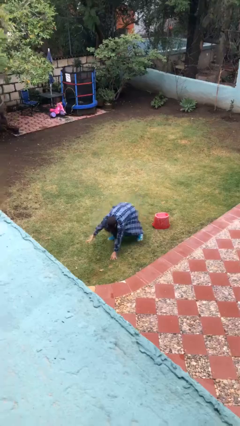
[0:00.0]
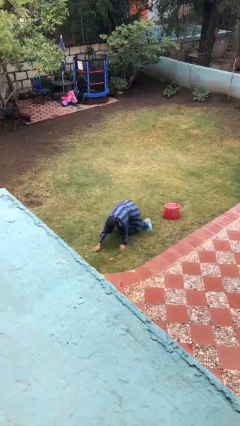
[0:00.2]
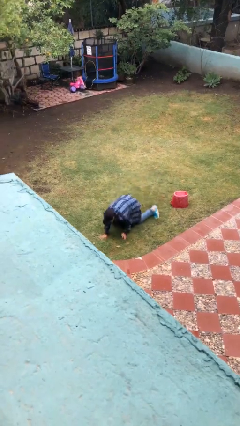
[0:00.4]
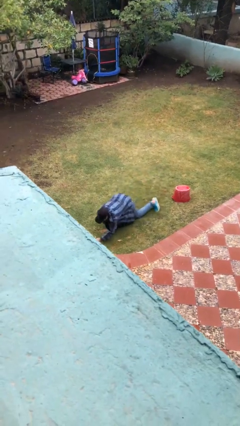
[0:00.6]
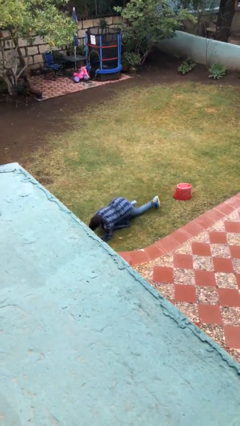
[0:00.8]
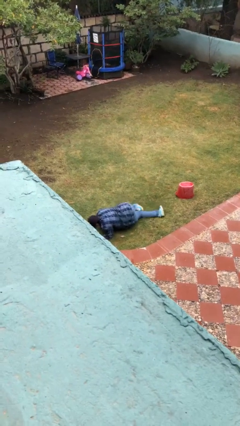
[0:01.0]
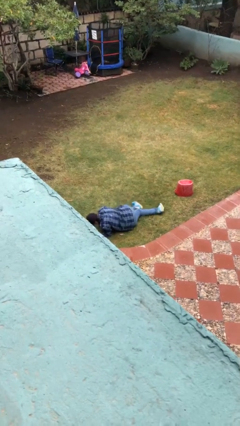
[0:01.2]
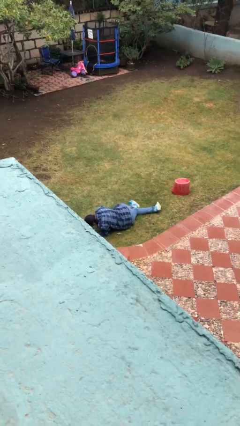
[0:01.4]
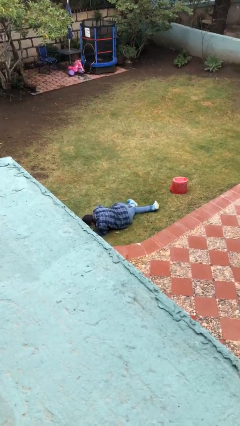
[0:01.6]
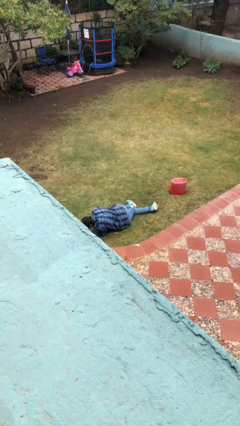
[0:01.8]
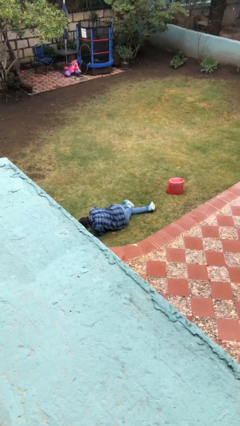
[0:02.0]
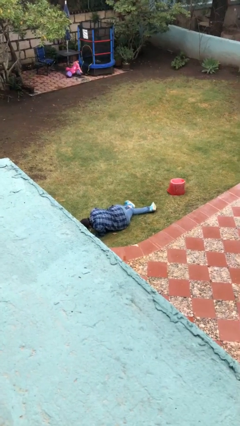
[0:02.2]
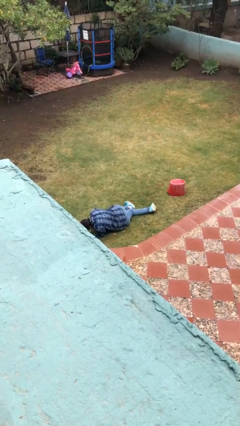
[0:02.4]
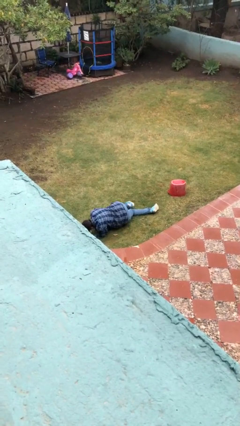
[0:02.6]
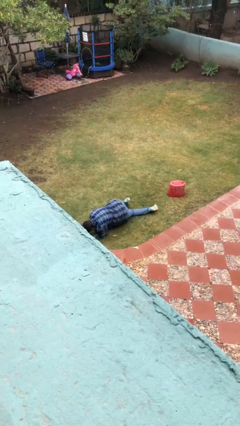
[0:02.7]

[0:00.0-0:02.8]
person lies down on floor

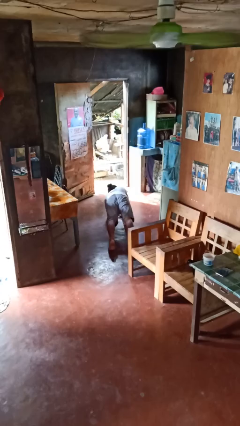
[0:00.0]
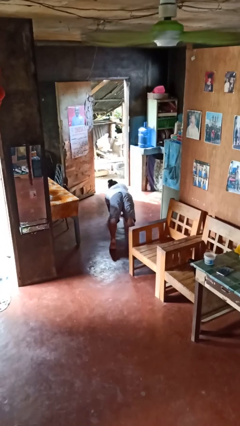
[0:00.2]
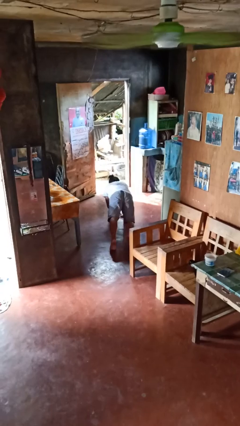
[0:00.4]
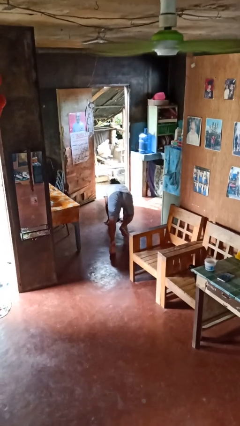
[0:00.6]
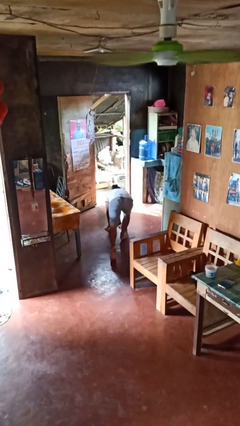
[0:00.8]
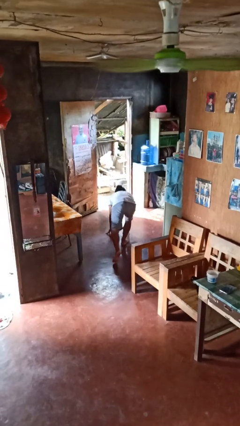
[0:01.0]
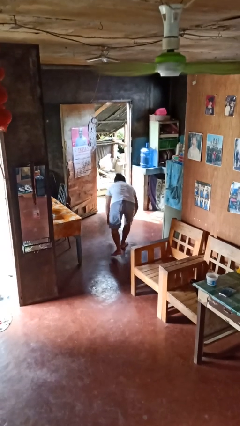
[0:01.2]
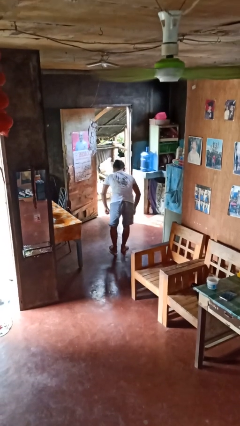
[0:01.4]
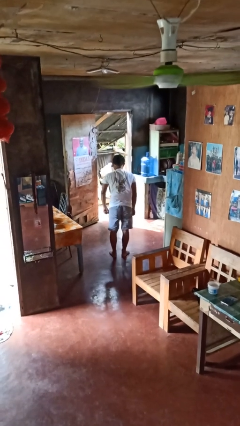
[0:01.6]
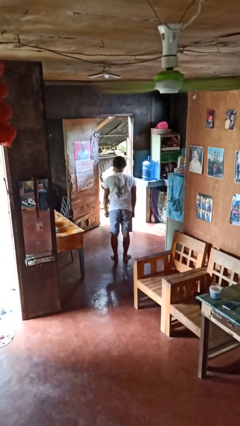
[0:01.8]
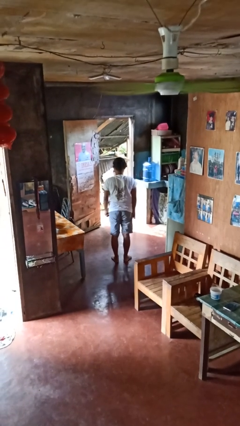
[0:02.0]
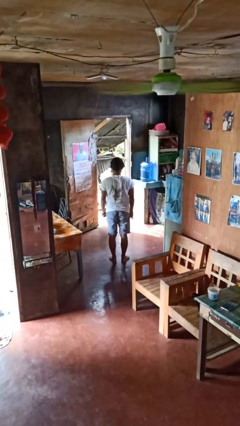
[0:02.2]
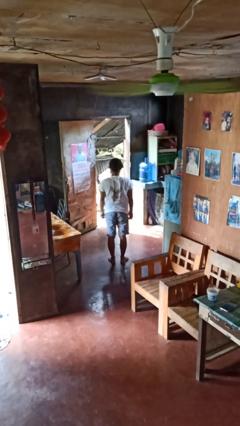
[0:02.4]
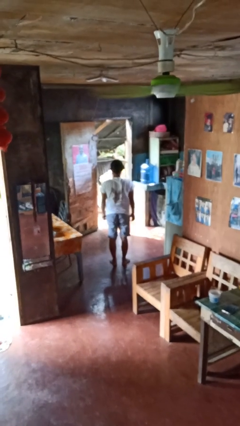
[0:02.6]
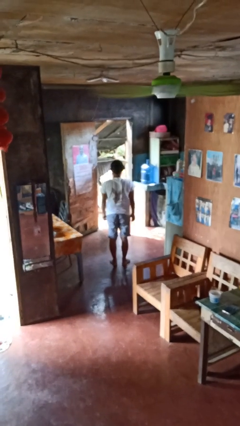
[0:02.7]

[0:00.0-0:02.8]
person stands up from floor

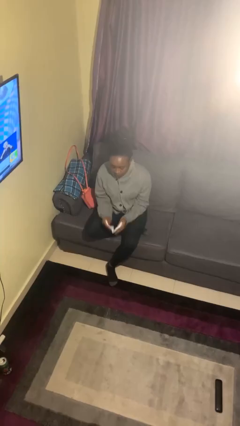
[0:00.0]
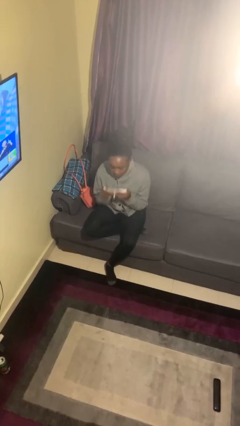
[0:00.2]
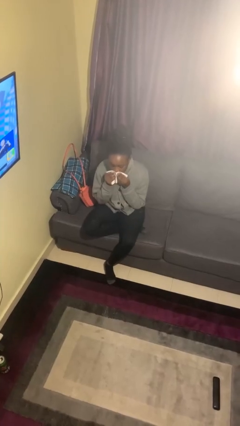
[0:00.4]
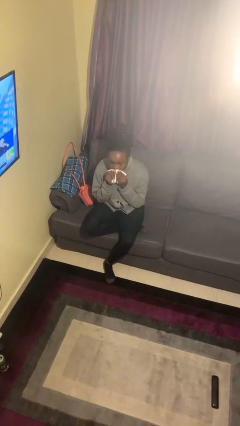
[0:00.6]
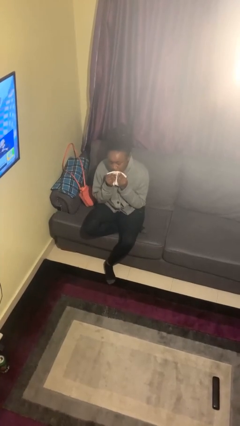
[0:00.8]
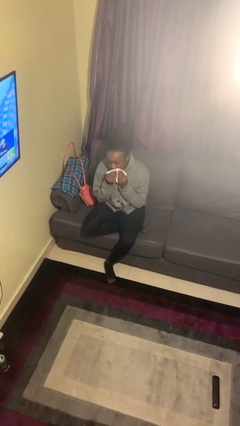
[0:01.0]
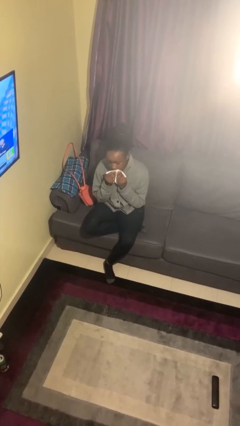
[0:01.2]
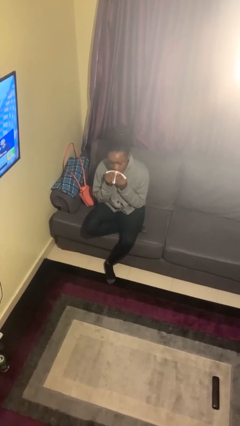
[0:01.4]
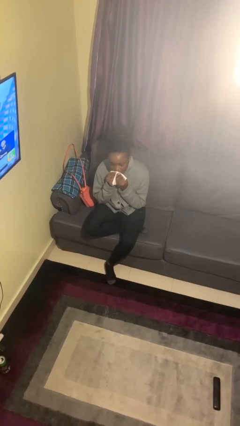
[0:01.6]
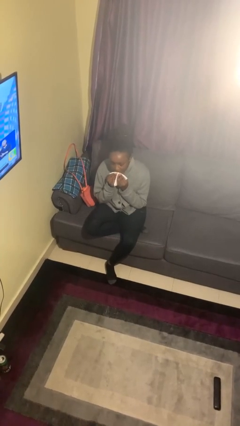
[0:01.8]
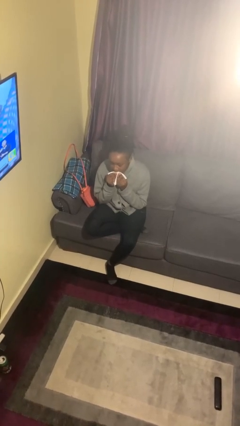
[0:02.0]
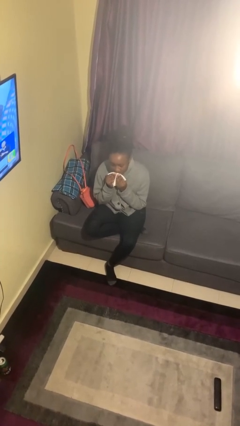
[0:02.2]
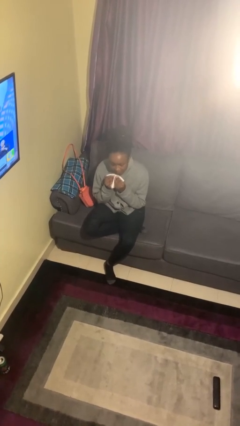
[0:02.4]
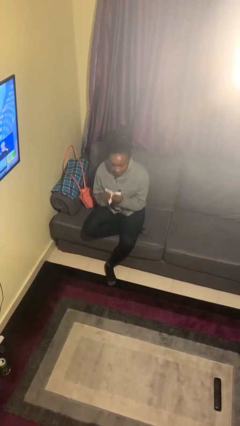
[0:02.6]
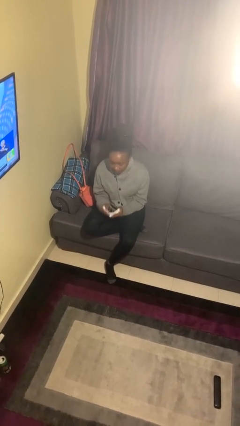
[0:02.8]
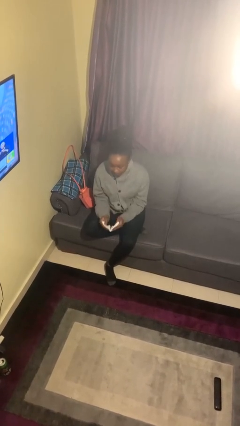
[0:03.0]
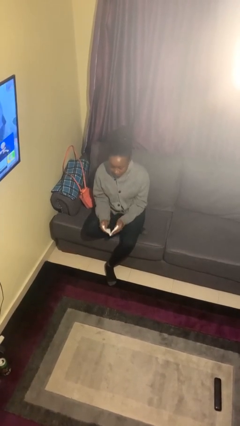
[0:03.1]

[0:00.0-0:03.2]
person wipes mouth with napkin

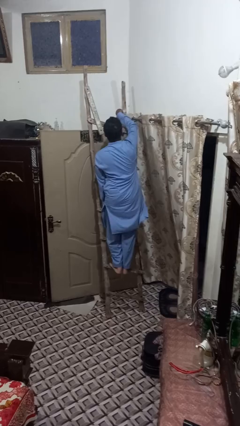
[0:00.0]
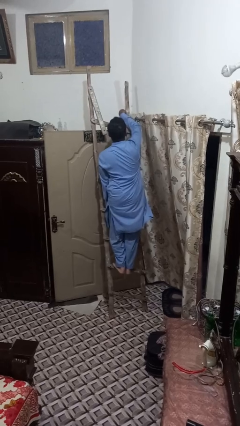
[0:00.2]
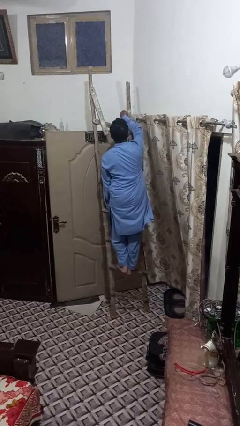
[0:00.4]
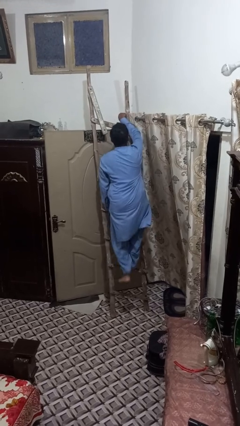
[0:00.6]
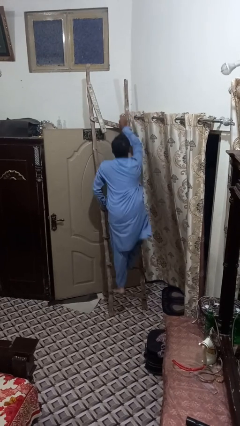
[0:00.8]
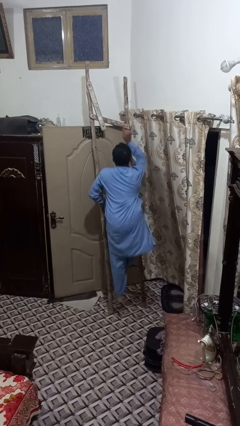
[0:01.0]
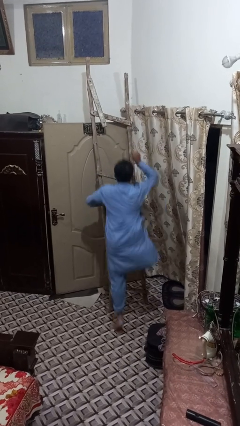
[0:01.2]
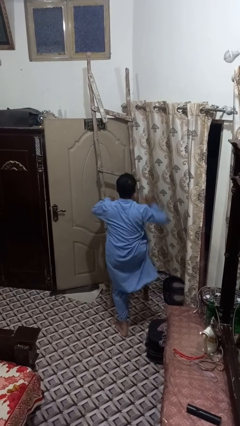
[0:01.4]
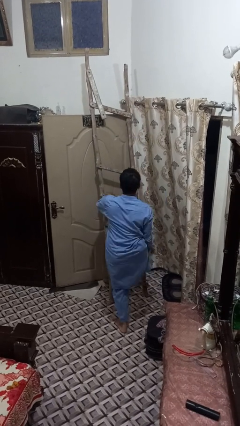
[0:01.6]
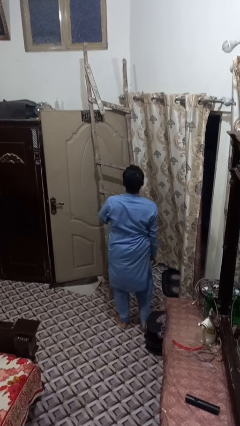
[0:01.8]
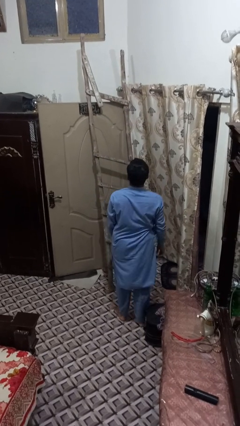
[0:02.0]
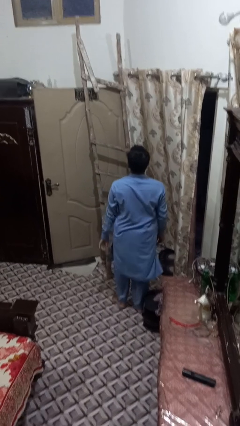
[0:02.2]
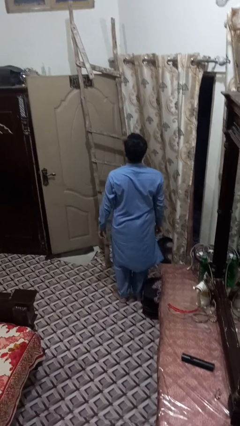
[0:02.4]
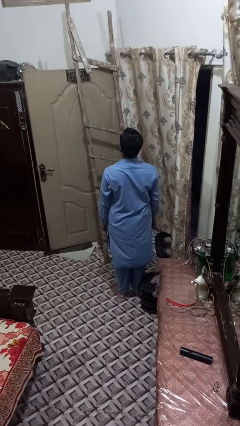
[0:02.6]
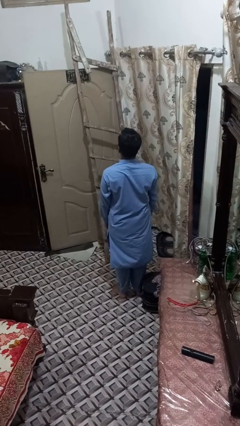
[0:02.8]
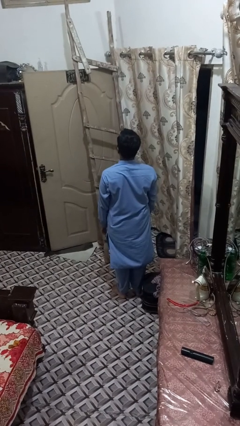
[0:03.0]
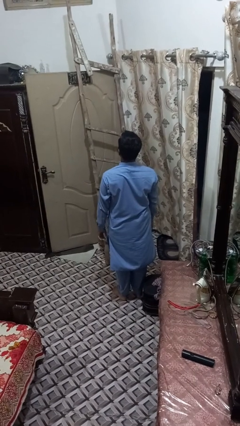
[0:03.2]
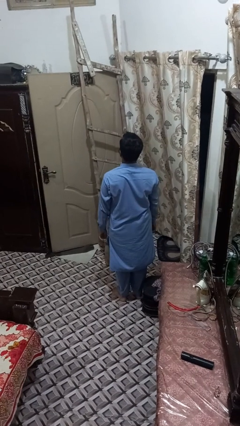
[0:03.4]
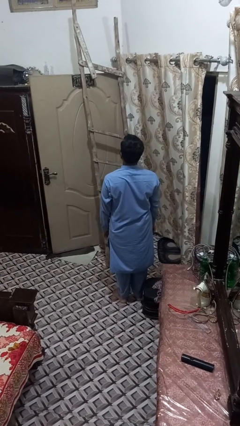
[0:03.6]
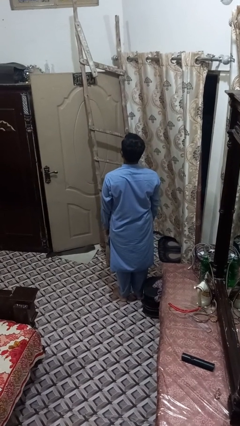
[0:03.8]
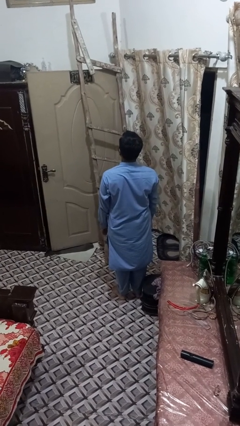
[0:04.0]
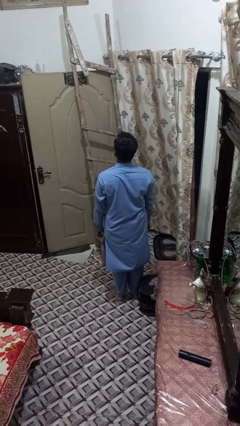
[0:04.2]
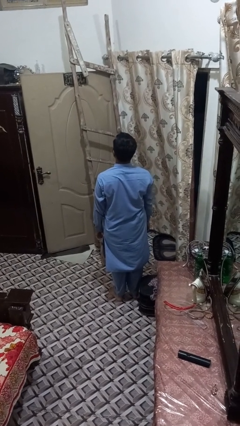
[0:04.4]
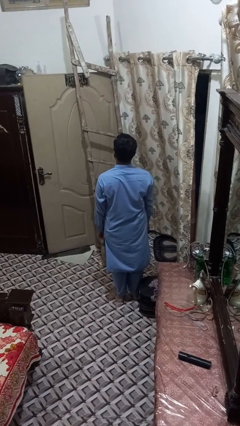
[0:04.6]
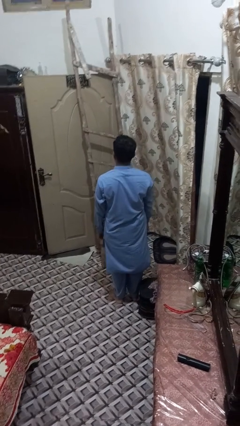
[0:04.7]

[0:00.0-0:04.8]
person climbs down ladder

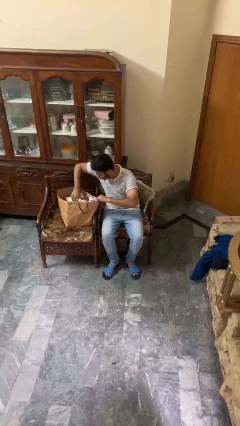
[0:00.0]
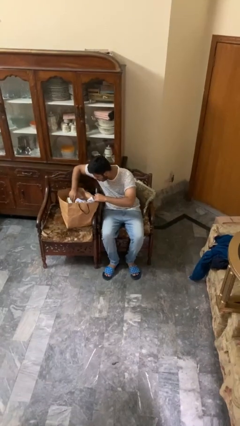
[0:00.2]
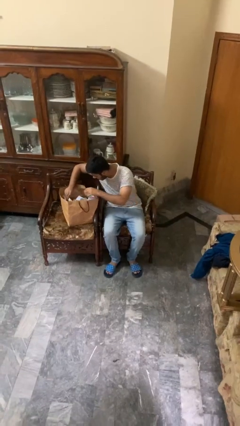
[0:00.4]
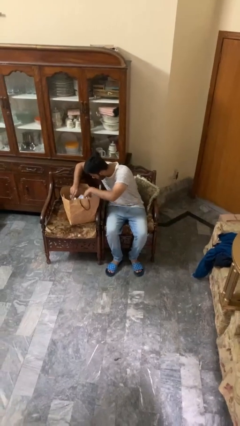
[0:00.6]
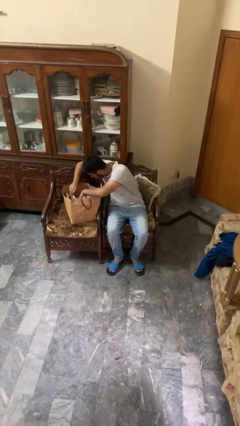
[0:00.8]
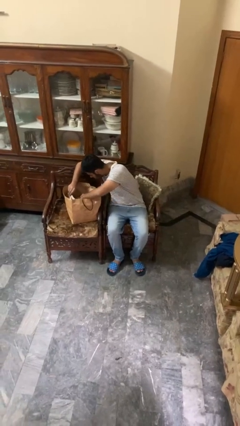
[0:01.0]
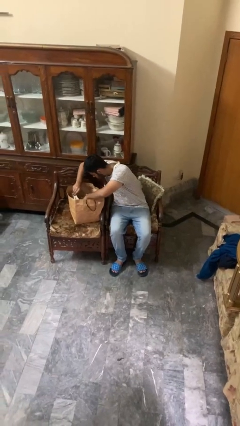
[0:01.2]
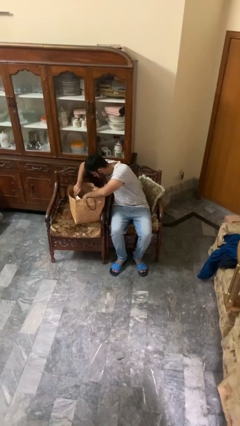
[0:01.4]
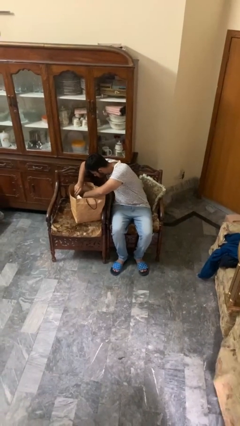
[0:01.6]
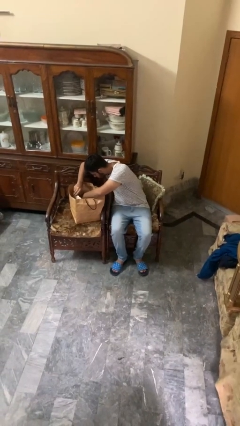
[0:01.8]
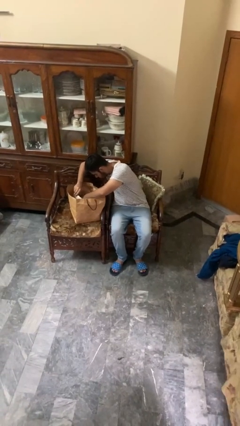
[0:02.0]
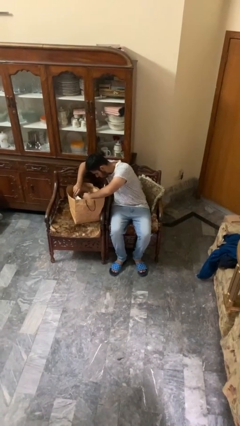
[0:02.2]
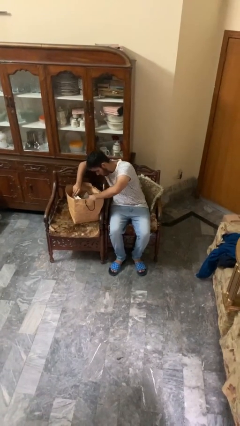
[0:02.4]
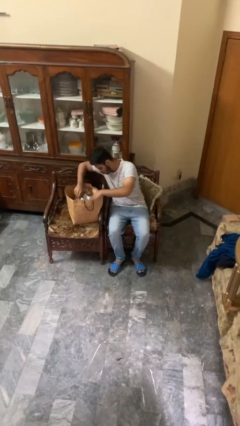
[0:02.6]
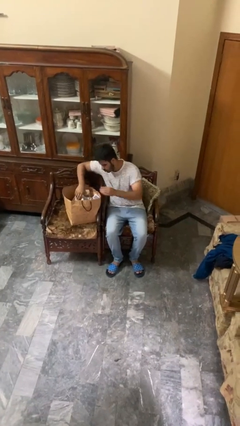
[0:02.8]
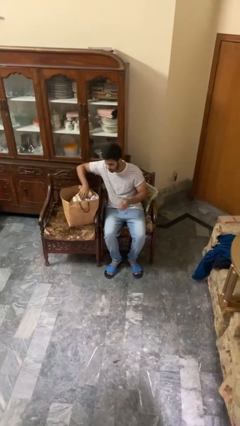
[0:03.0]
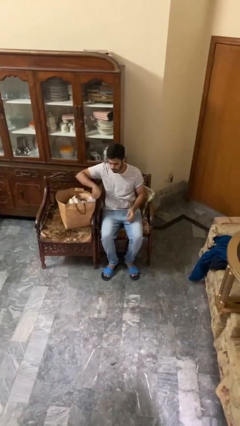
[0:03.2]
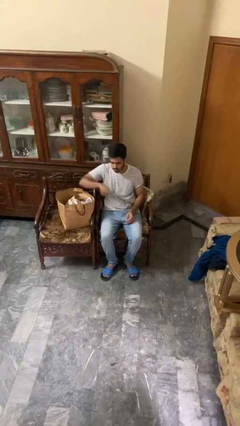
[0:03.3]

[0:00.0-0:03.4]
person searches in bag

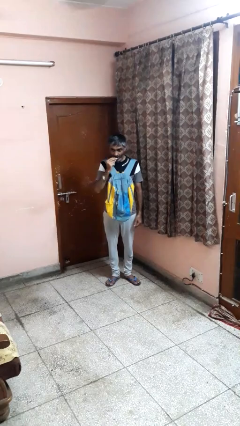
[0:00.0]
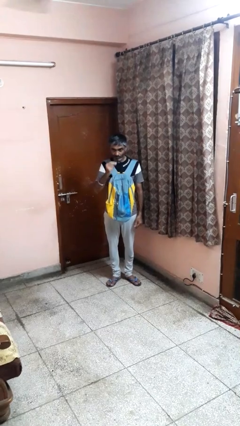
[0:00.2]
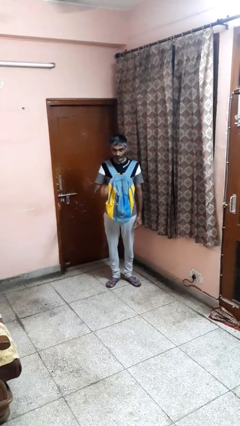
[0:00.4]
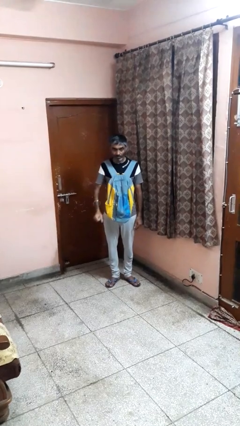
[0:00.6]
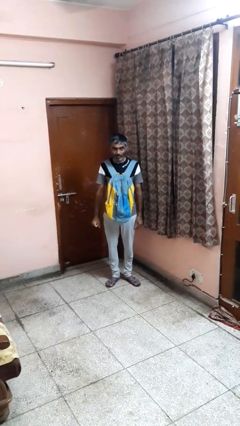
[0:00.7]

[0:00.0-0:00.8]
person eats snack from bag
